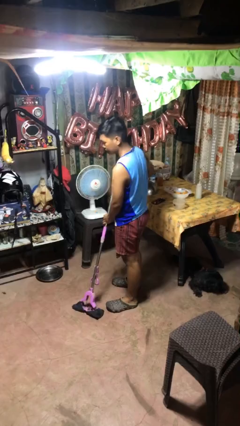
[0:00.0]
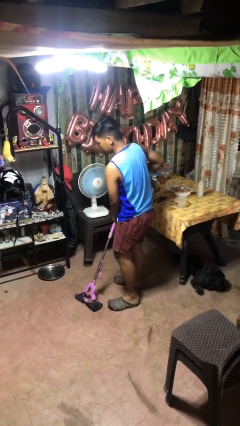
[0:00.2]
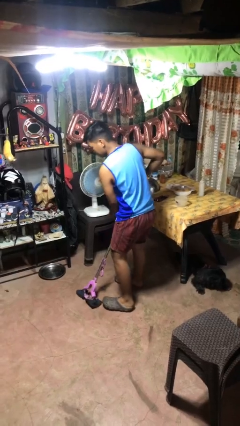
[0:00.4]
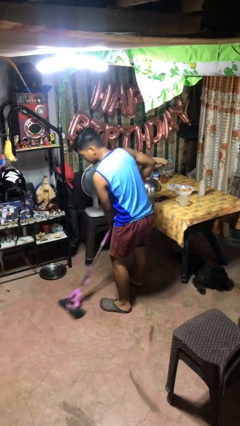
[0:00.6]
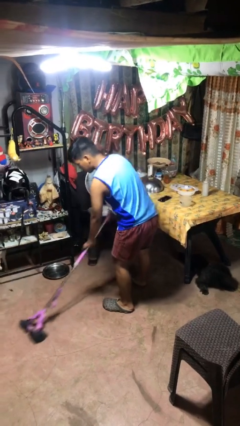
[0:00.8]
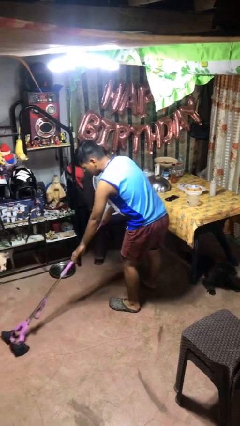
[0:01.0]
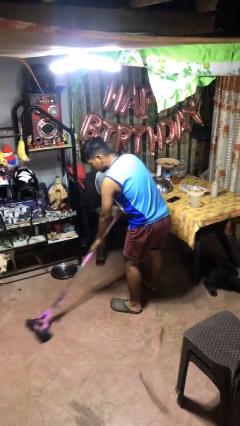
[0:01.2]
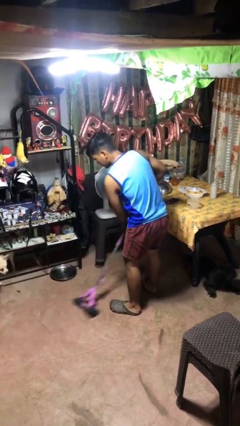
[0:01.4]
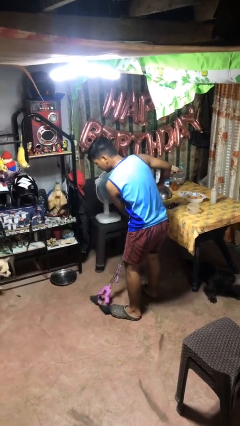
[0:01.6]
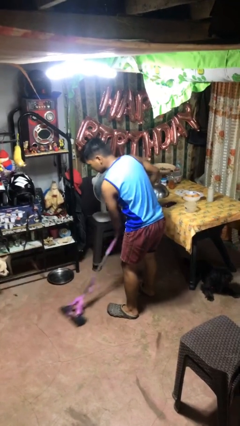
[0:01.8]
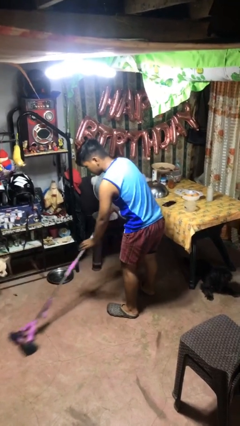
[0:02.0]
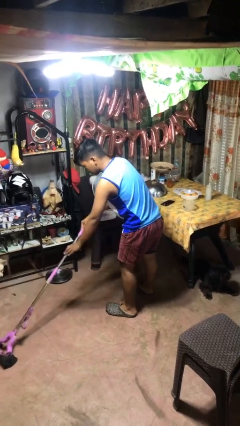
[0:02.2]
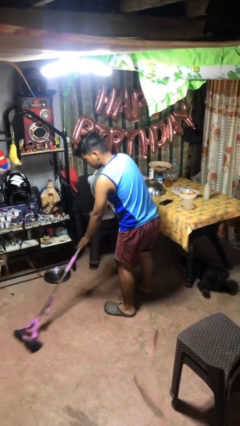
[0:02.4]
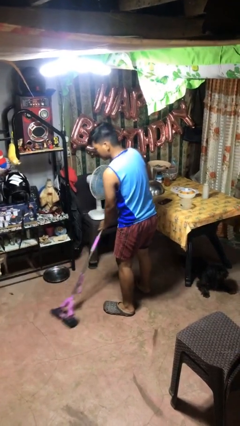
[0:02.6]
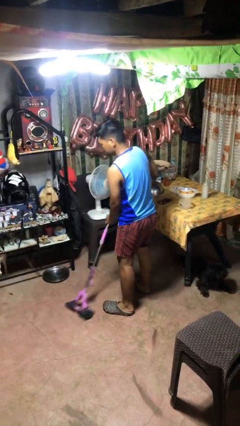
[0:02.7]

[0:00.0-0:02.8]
person mops

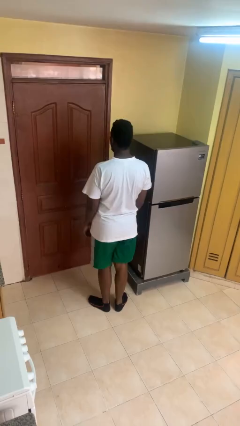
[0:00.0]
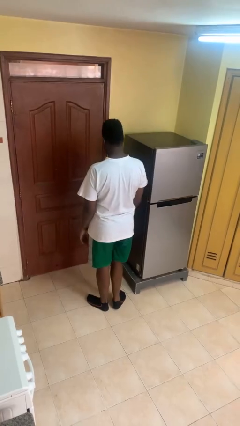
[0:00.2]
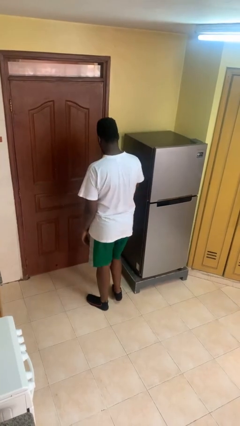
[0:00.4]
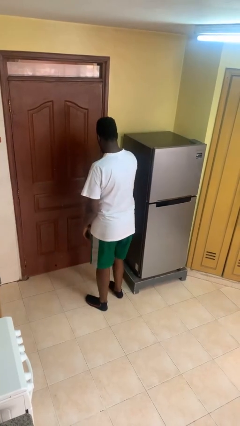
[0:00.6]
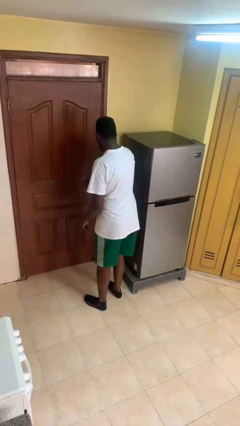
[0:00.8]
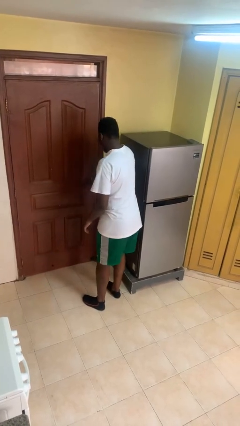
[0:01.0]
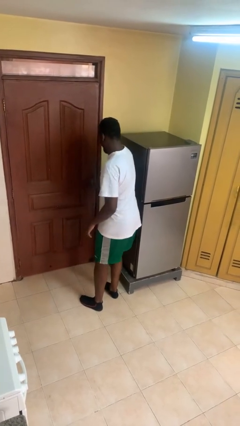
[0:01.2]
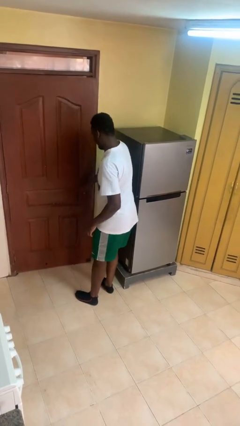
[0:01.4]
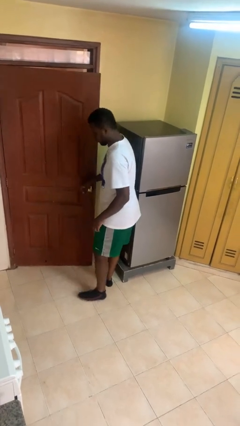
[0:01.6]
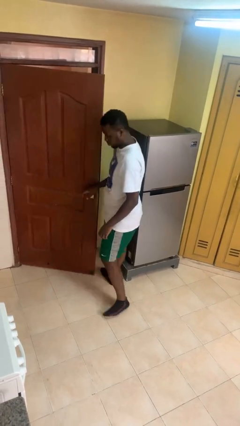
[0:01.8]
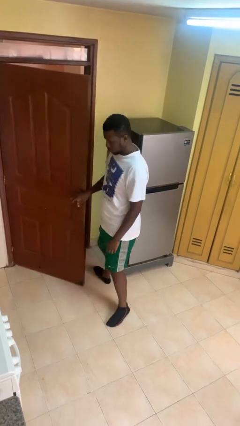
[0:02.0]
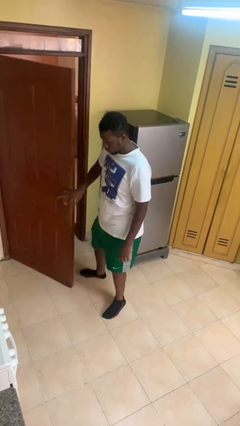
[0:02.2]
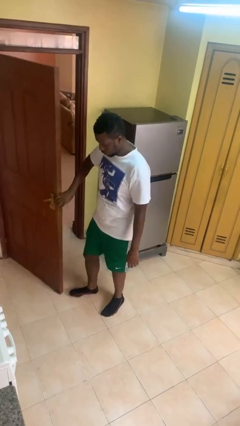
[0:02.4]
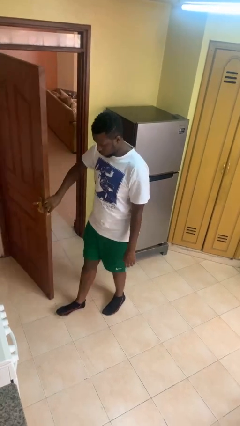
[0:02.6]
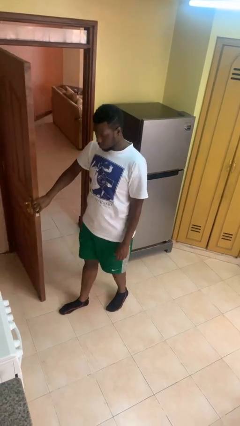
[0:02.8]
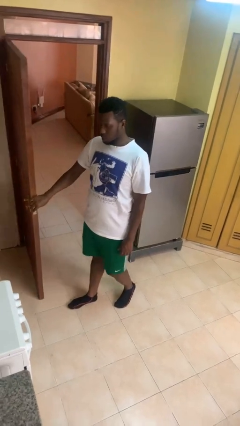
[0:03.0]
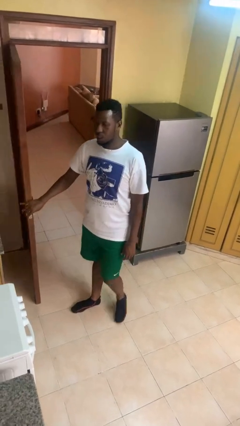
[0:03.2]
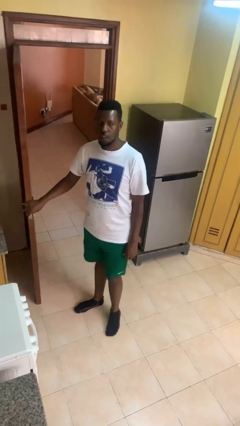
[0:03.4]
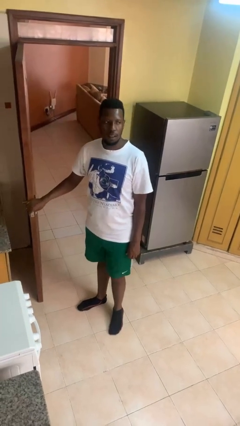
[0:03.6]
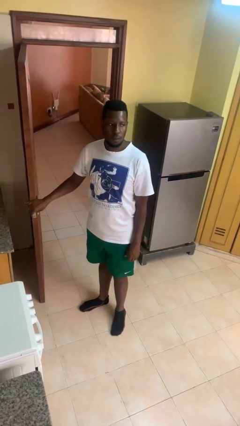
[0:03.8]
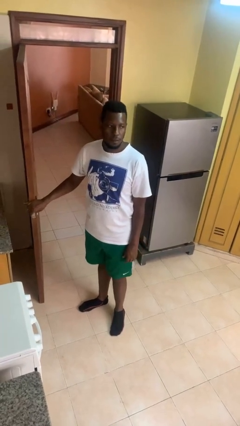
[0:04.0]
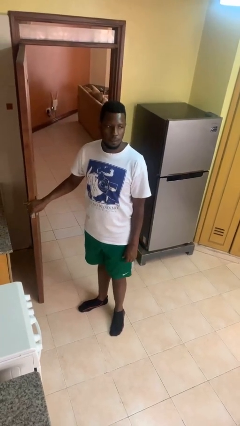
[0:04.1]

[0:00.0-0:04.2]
person opens facility door

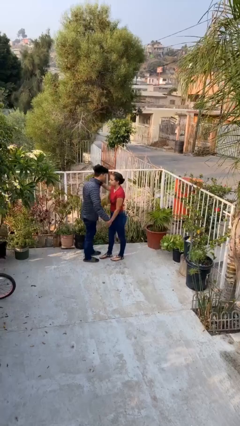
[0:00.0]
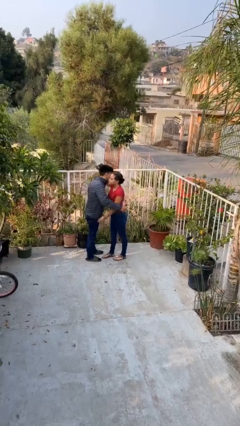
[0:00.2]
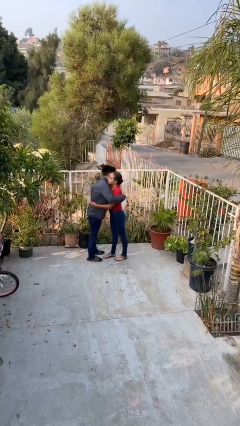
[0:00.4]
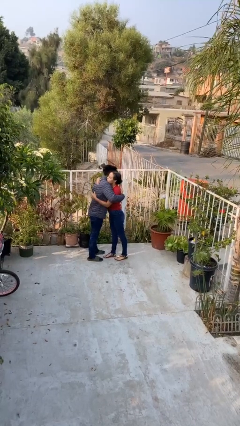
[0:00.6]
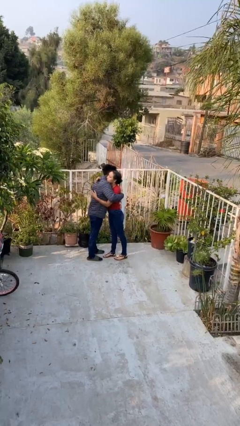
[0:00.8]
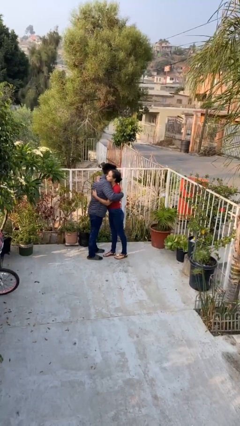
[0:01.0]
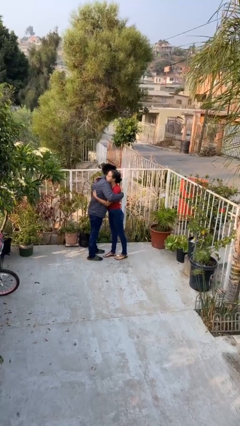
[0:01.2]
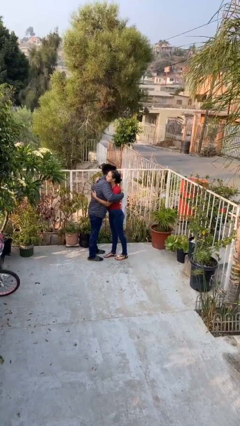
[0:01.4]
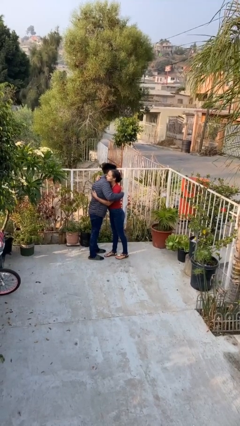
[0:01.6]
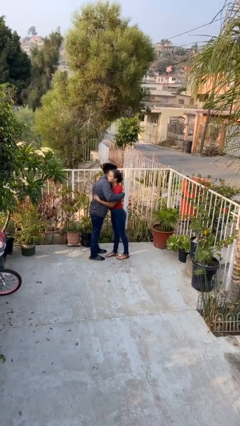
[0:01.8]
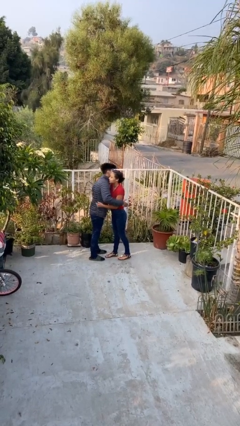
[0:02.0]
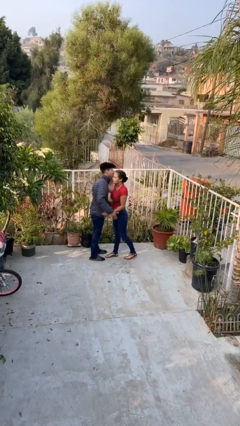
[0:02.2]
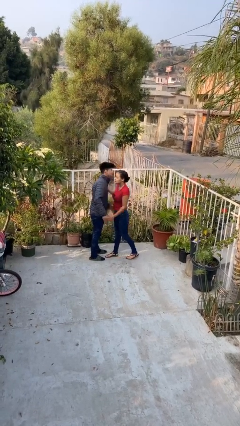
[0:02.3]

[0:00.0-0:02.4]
person embraces person

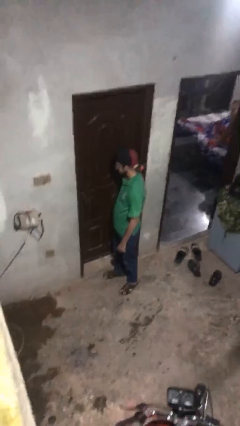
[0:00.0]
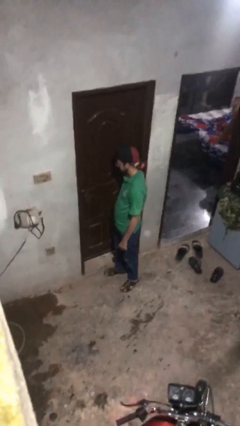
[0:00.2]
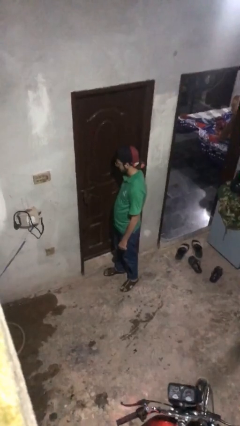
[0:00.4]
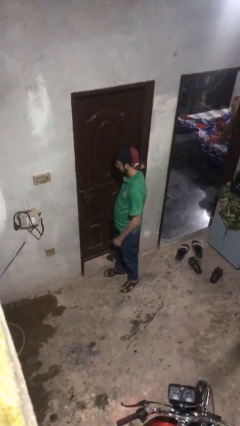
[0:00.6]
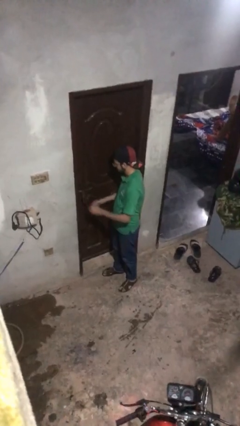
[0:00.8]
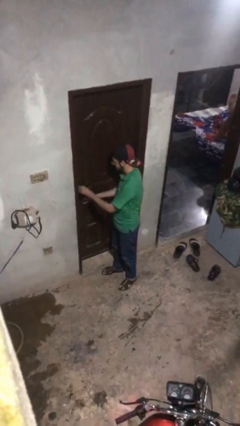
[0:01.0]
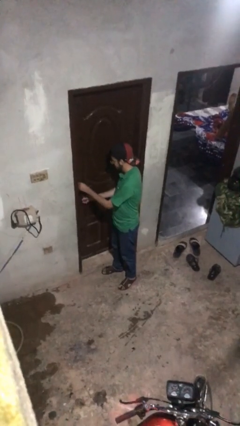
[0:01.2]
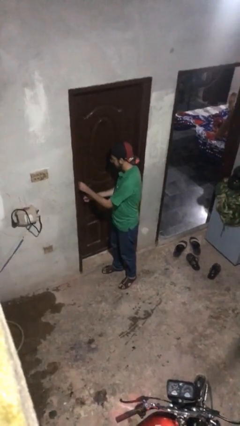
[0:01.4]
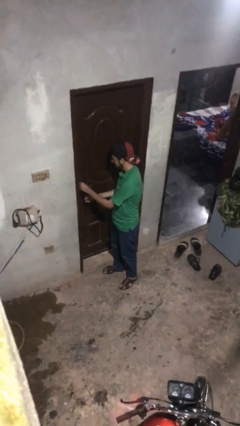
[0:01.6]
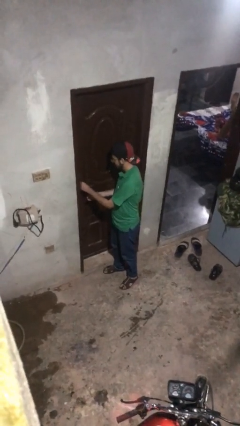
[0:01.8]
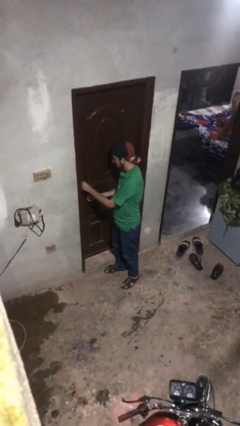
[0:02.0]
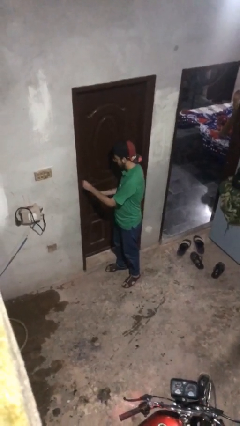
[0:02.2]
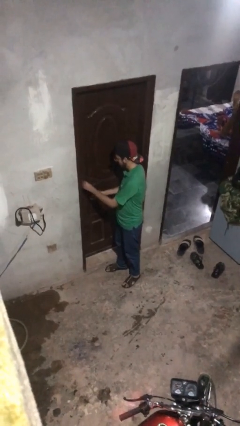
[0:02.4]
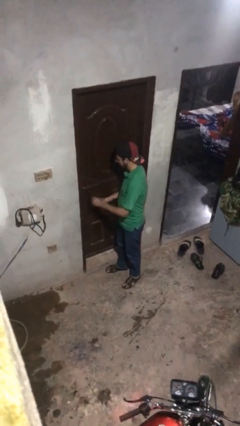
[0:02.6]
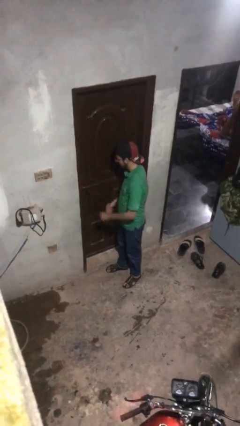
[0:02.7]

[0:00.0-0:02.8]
person unlocks door with keys

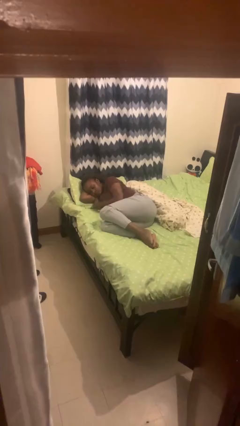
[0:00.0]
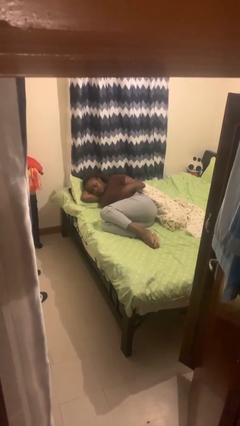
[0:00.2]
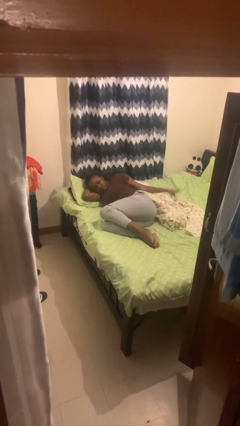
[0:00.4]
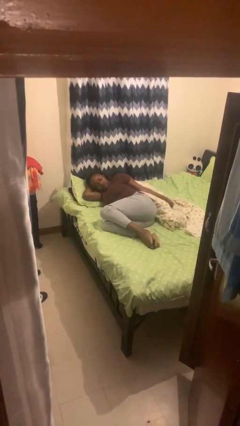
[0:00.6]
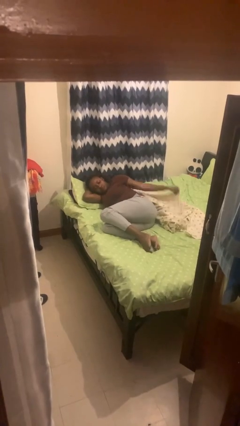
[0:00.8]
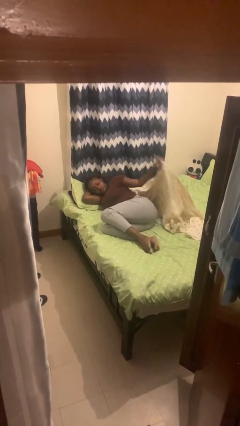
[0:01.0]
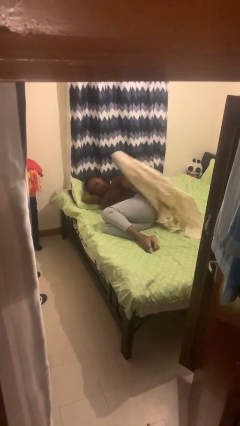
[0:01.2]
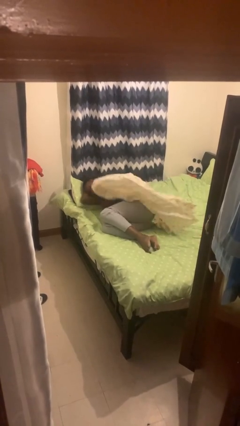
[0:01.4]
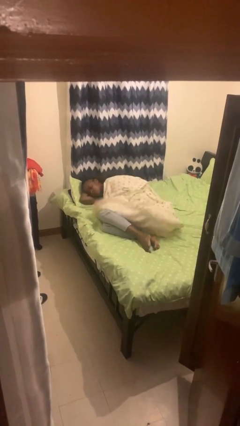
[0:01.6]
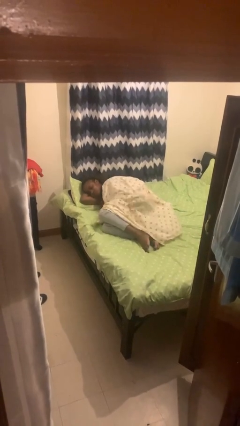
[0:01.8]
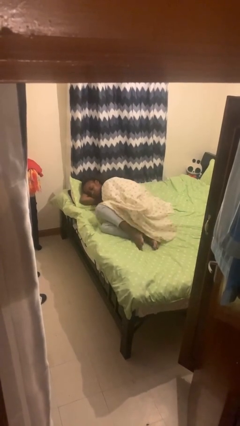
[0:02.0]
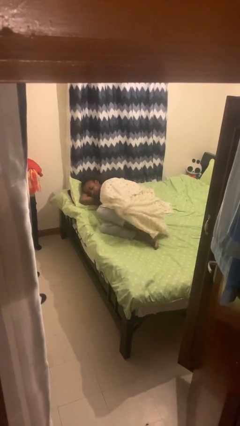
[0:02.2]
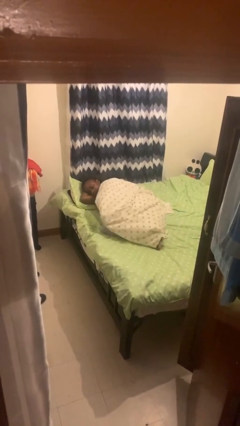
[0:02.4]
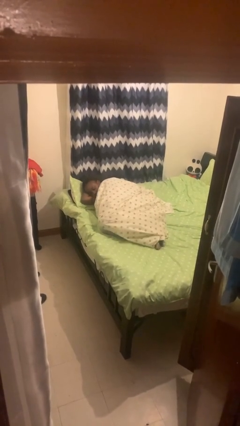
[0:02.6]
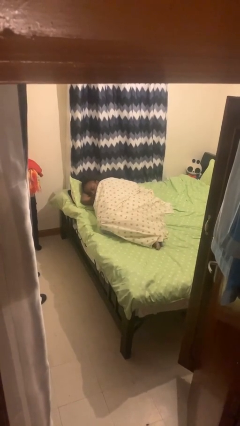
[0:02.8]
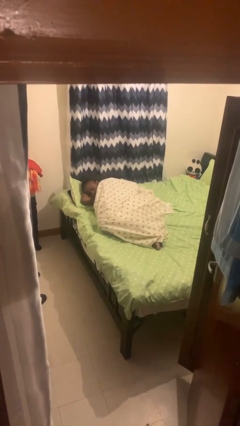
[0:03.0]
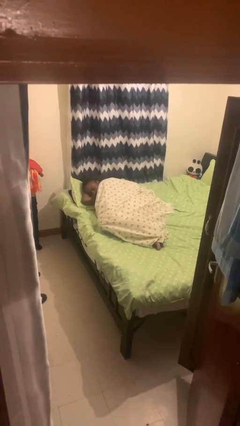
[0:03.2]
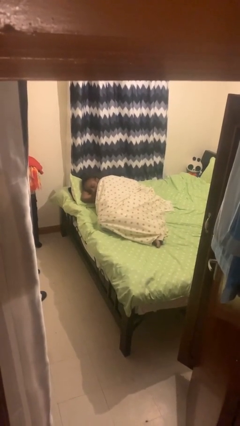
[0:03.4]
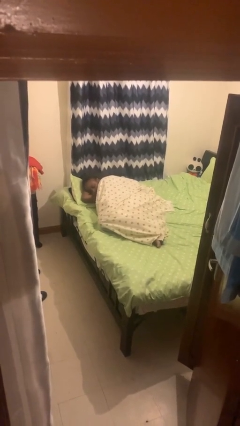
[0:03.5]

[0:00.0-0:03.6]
person covers with bedsheets

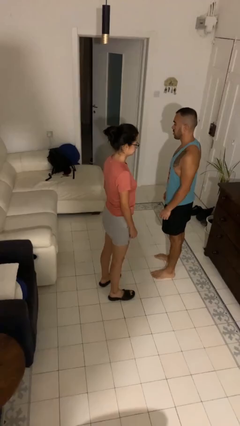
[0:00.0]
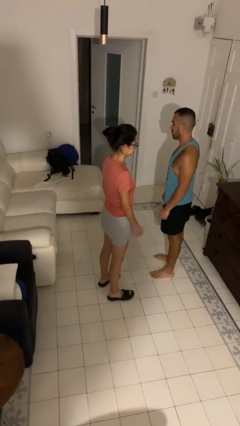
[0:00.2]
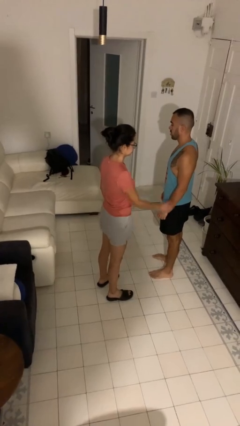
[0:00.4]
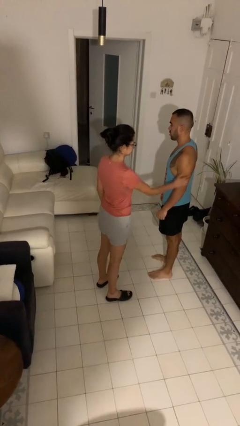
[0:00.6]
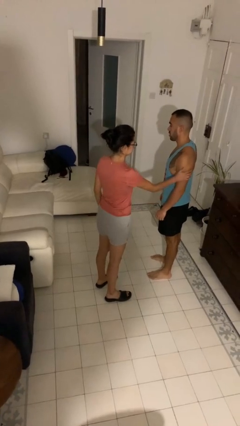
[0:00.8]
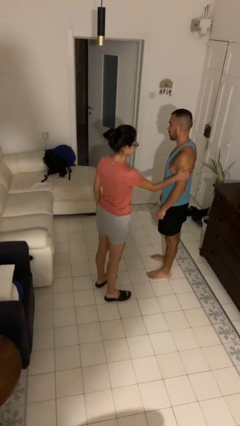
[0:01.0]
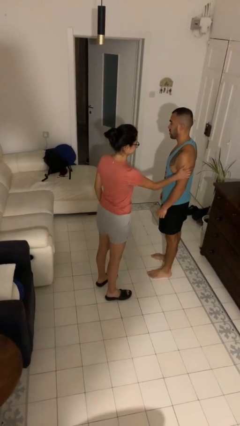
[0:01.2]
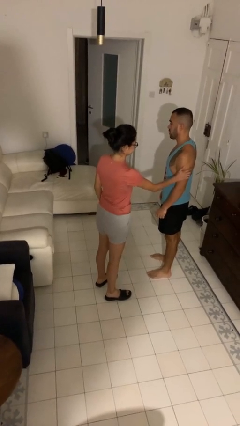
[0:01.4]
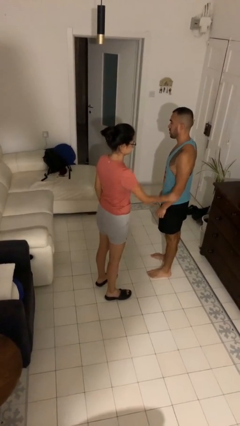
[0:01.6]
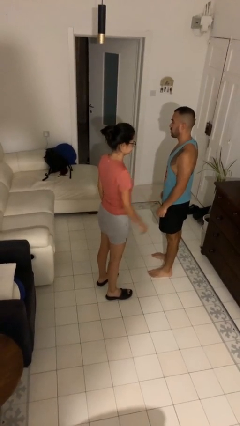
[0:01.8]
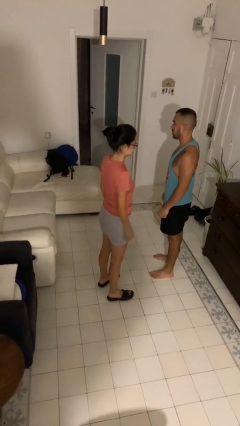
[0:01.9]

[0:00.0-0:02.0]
person grabs person by bicep
